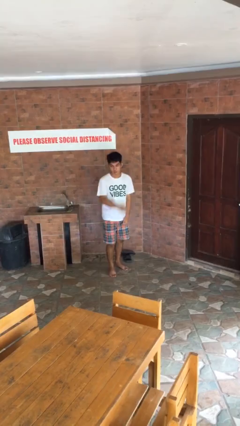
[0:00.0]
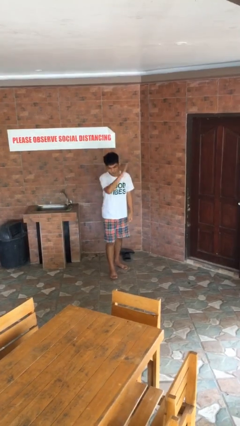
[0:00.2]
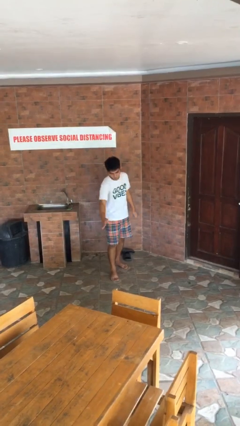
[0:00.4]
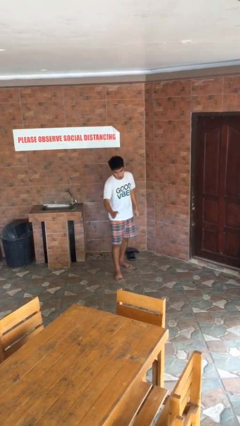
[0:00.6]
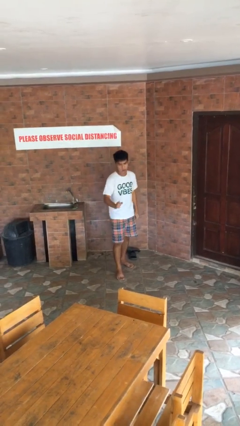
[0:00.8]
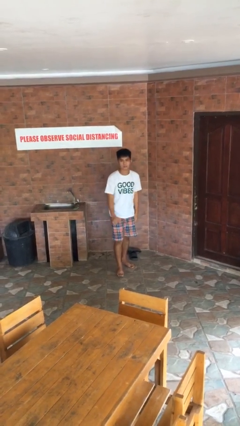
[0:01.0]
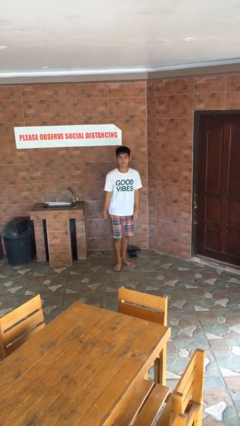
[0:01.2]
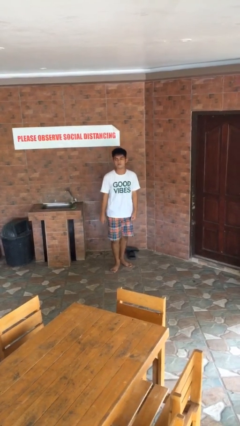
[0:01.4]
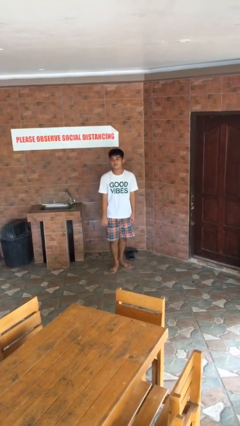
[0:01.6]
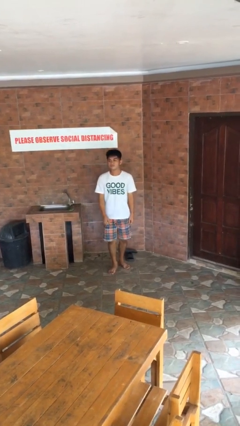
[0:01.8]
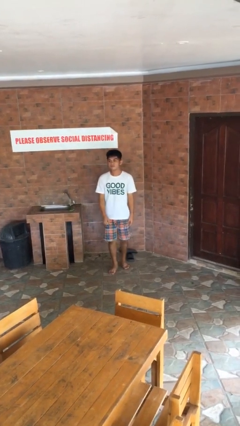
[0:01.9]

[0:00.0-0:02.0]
person karate chop

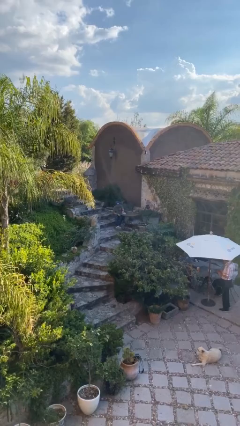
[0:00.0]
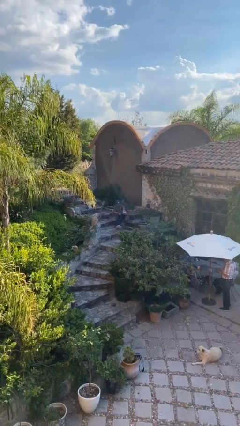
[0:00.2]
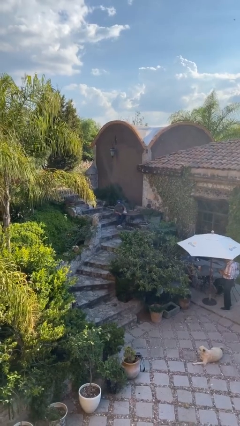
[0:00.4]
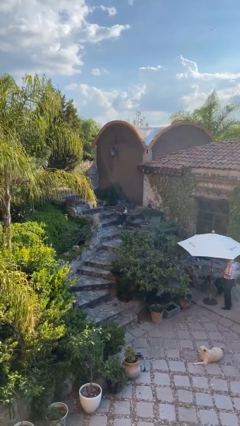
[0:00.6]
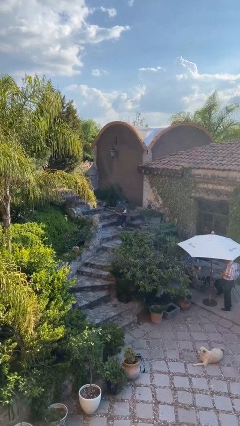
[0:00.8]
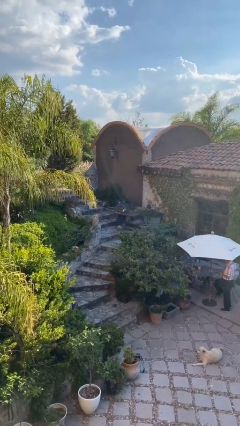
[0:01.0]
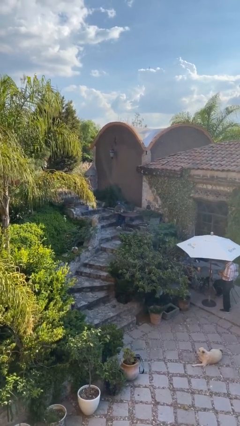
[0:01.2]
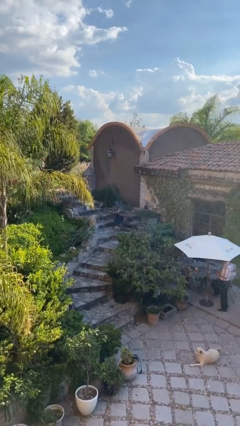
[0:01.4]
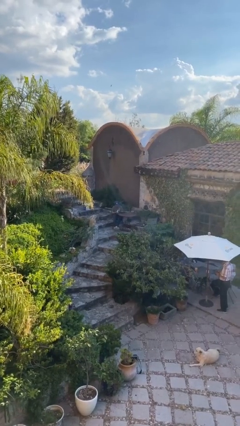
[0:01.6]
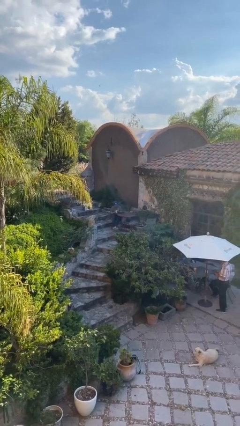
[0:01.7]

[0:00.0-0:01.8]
person picks up object from table

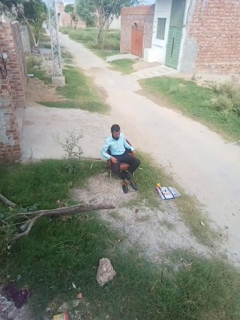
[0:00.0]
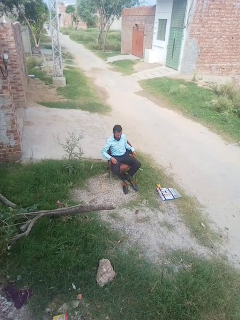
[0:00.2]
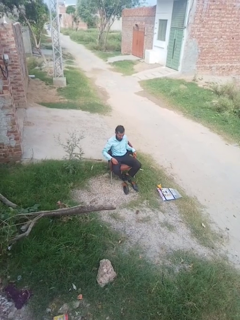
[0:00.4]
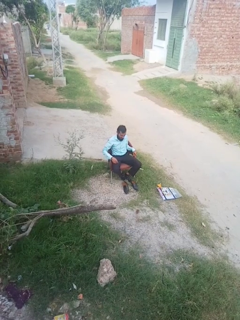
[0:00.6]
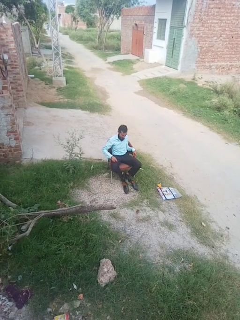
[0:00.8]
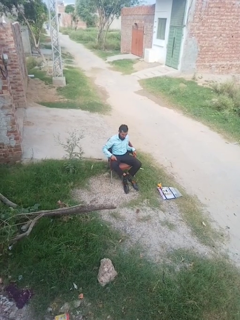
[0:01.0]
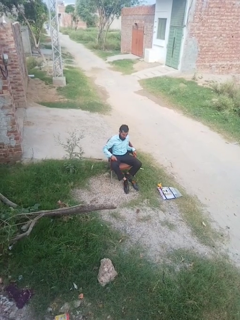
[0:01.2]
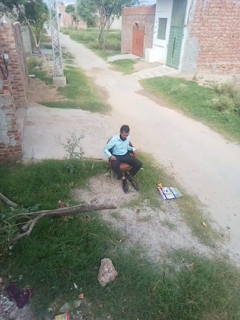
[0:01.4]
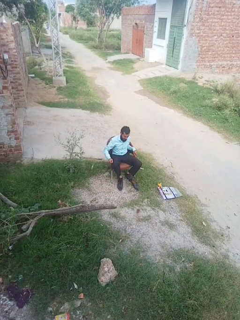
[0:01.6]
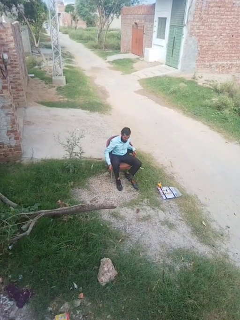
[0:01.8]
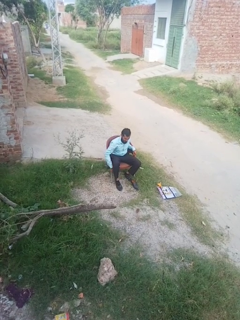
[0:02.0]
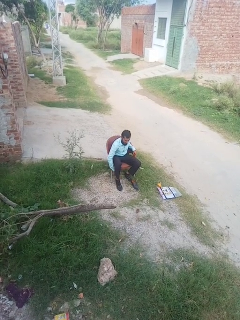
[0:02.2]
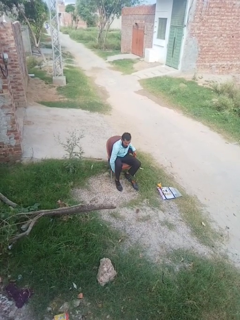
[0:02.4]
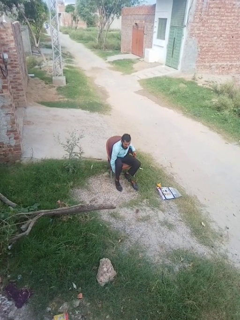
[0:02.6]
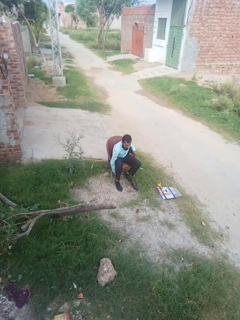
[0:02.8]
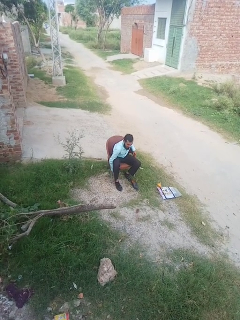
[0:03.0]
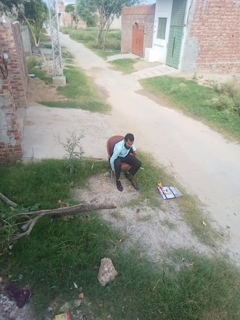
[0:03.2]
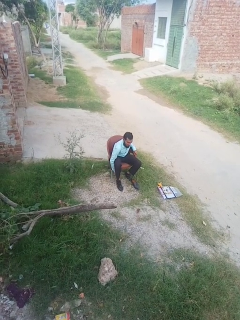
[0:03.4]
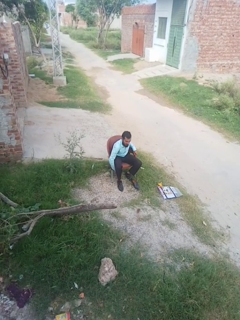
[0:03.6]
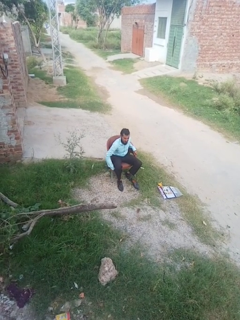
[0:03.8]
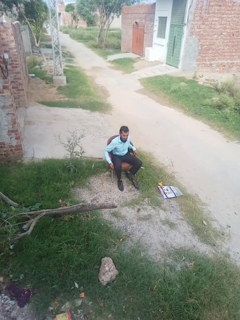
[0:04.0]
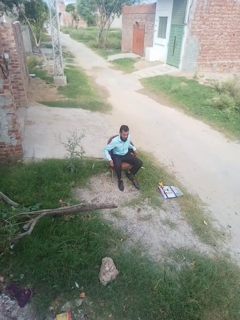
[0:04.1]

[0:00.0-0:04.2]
person puts on shoes

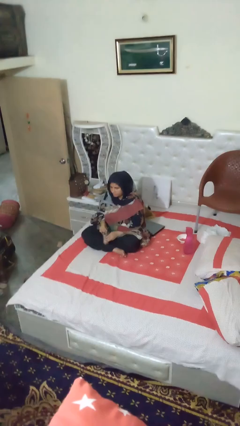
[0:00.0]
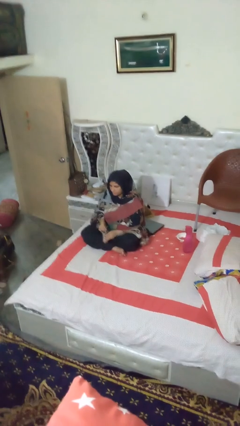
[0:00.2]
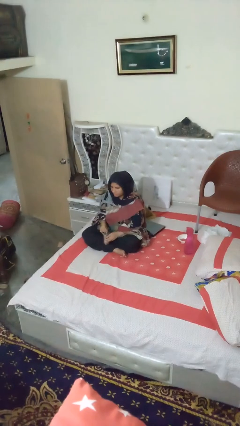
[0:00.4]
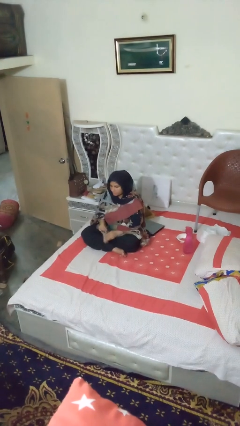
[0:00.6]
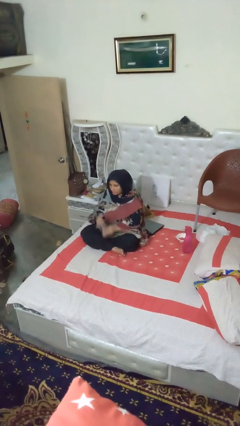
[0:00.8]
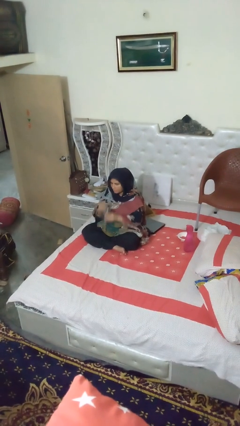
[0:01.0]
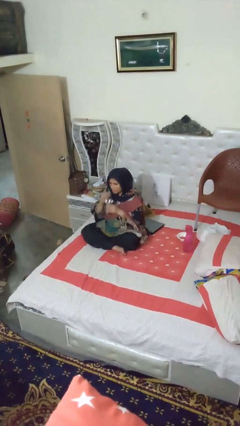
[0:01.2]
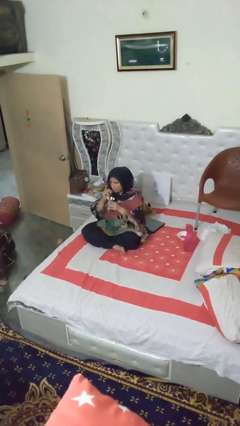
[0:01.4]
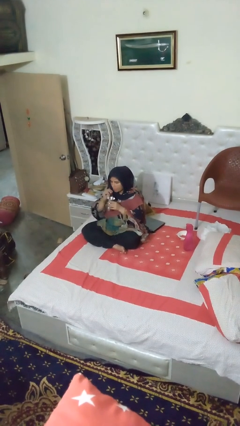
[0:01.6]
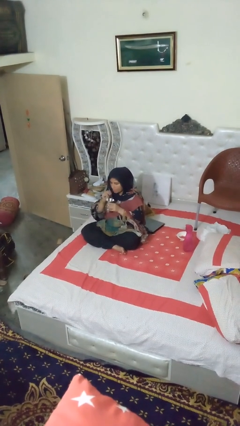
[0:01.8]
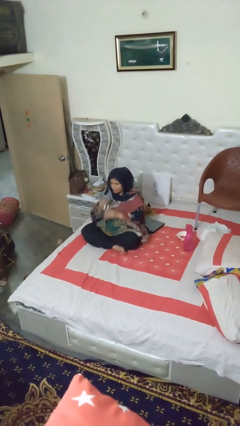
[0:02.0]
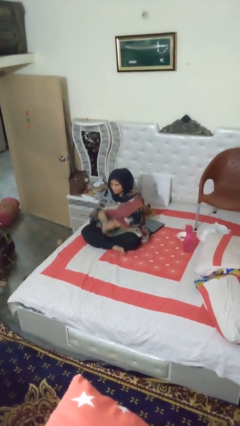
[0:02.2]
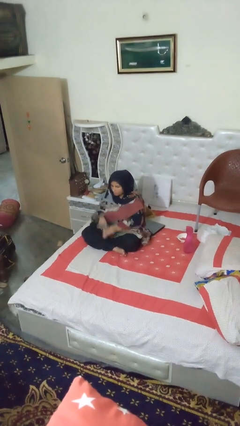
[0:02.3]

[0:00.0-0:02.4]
person drinks from straw

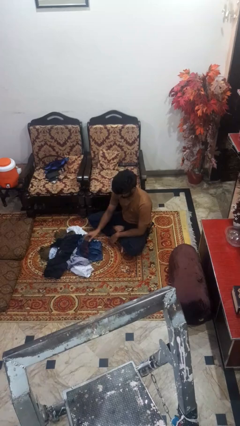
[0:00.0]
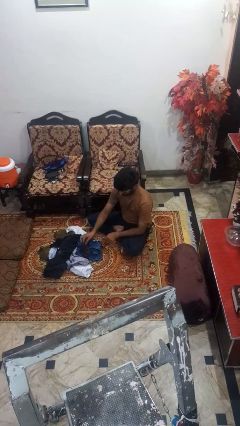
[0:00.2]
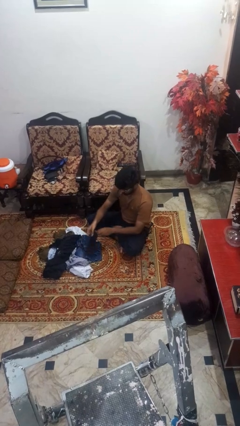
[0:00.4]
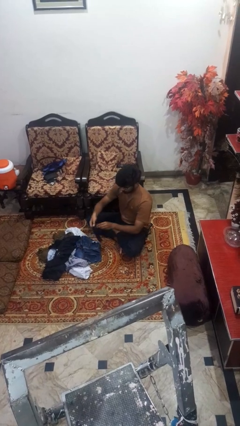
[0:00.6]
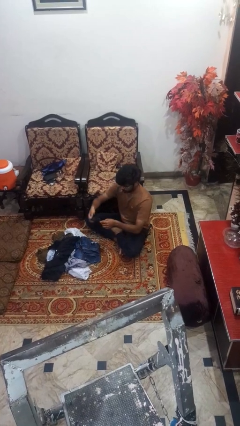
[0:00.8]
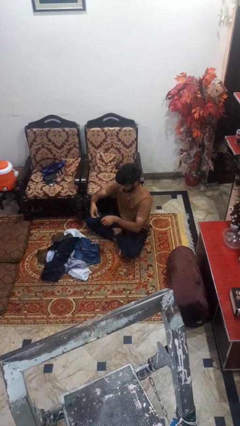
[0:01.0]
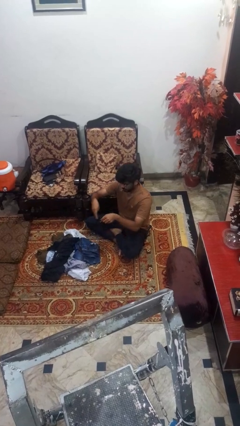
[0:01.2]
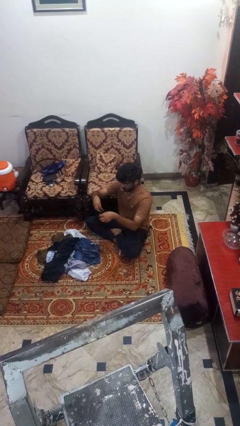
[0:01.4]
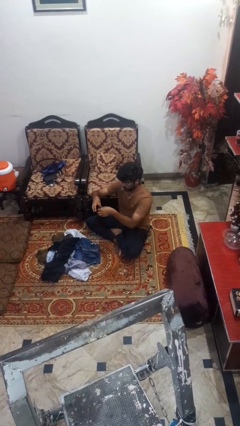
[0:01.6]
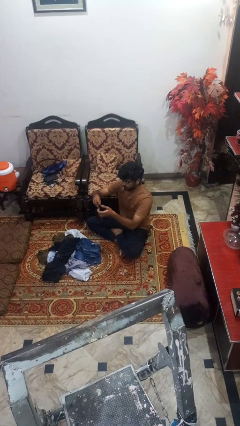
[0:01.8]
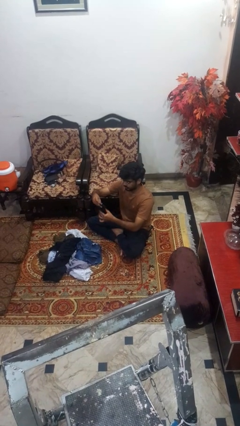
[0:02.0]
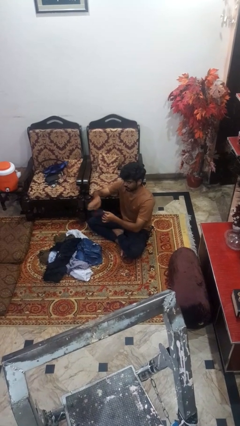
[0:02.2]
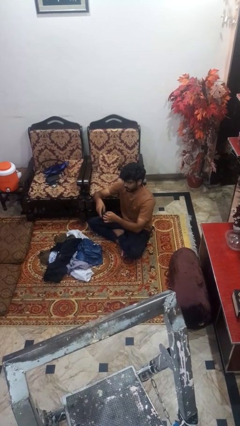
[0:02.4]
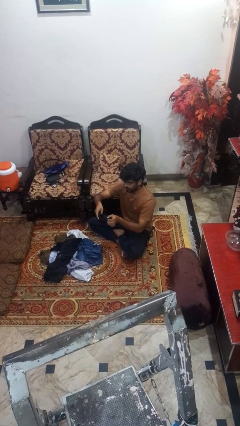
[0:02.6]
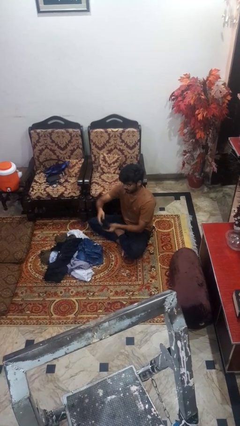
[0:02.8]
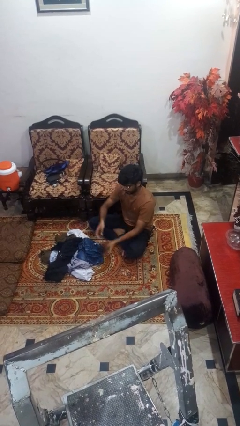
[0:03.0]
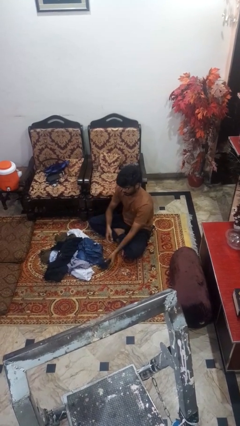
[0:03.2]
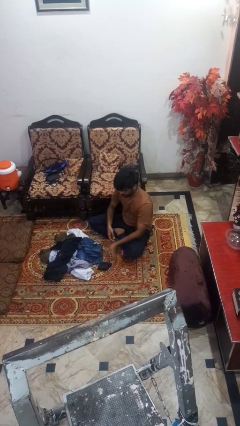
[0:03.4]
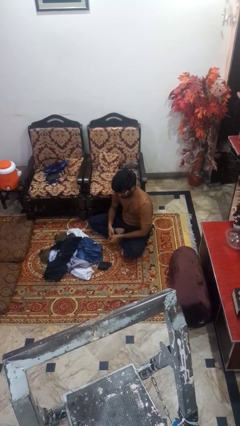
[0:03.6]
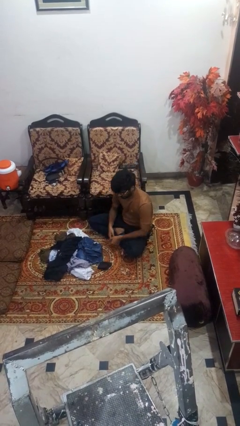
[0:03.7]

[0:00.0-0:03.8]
person folds socks

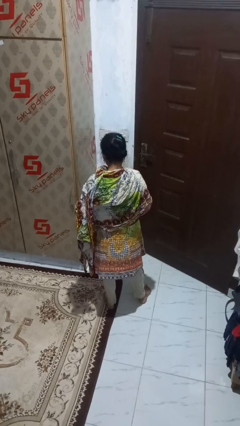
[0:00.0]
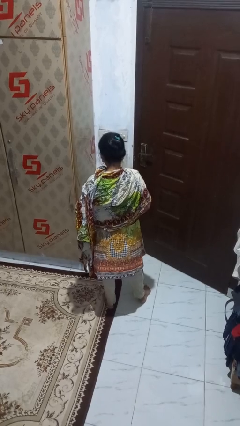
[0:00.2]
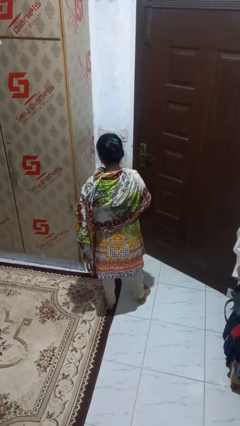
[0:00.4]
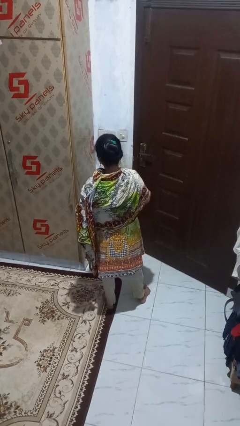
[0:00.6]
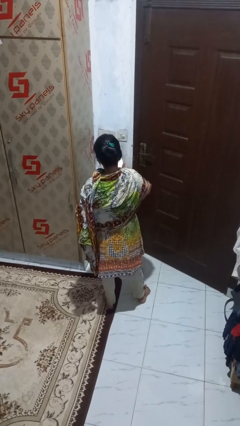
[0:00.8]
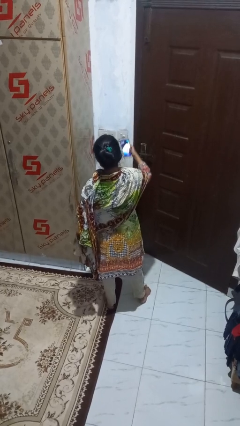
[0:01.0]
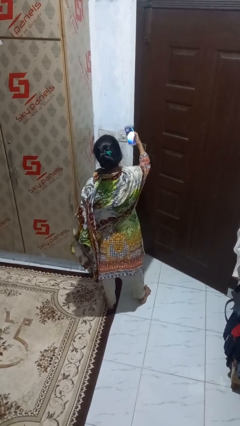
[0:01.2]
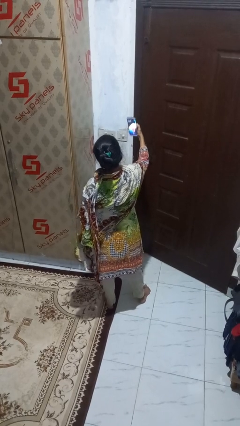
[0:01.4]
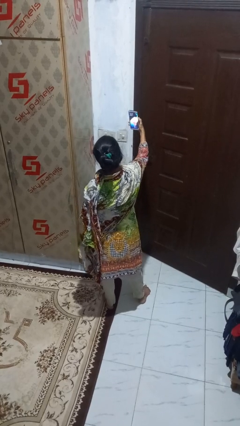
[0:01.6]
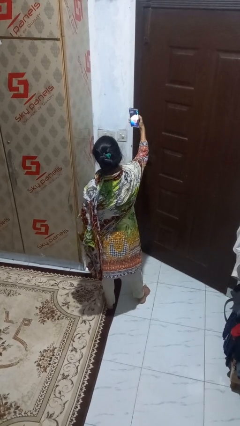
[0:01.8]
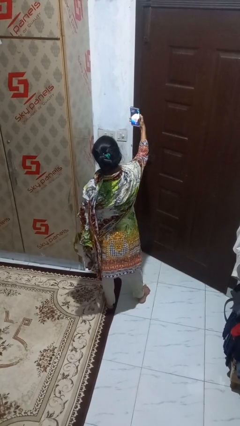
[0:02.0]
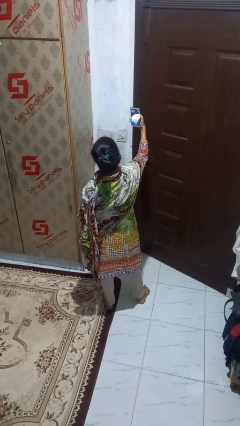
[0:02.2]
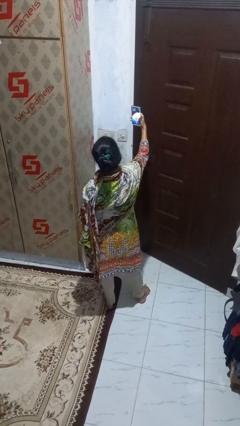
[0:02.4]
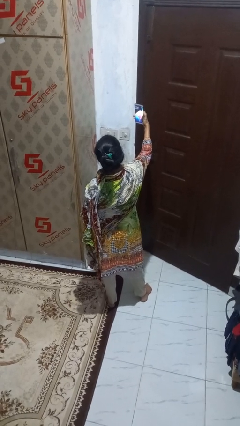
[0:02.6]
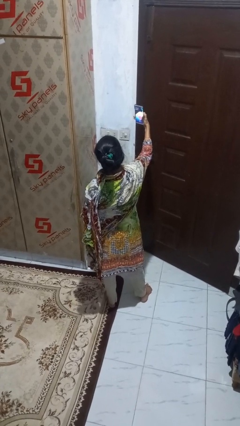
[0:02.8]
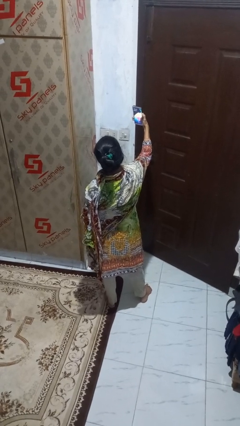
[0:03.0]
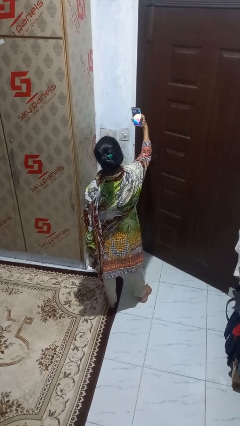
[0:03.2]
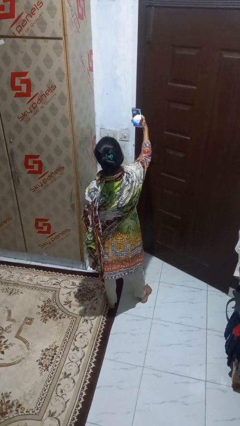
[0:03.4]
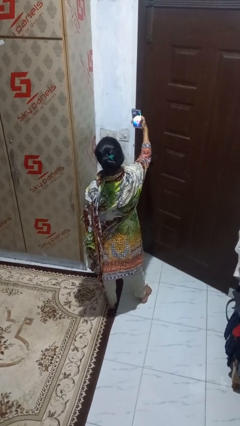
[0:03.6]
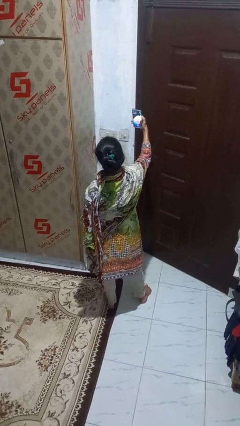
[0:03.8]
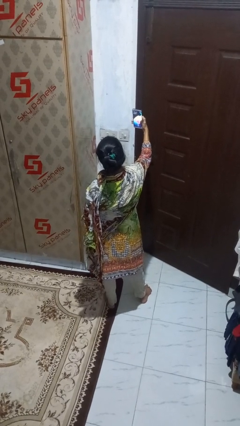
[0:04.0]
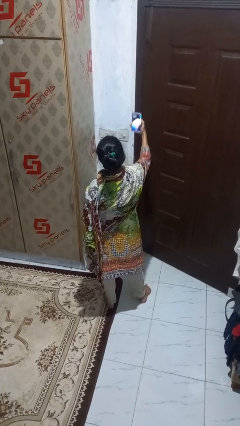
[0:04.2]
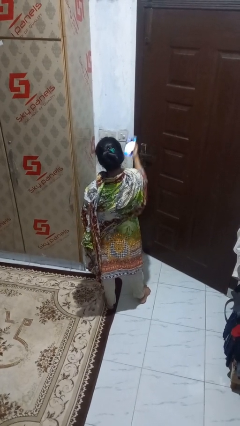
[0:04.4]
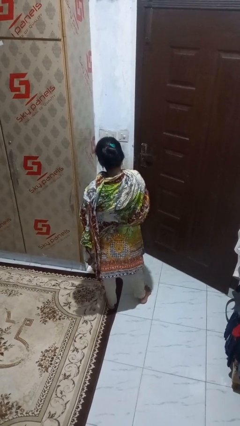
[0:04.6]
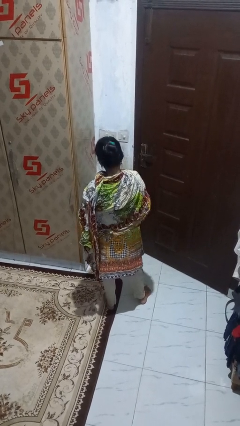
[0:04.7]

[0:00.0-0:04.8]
person takes selfie
